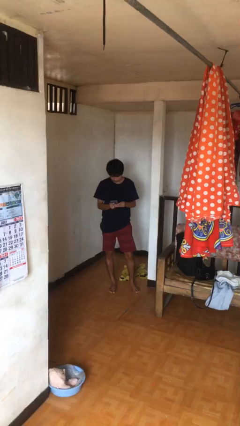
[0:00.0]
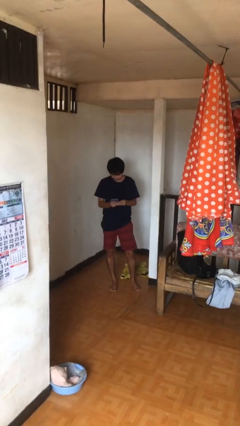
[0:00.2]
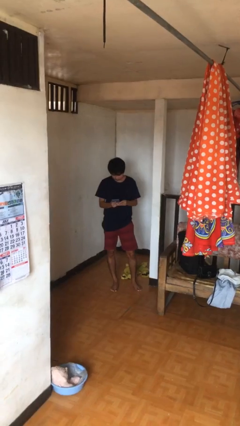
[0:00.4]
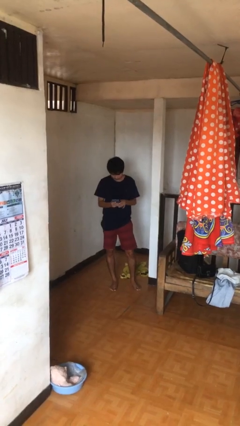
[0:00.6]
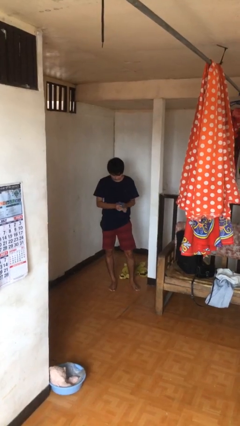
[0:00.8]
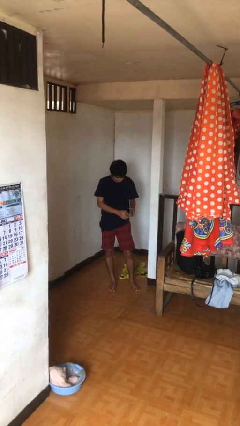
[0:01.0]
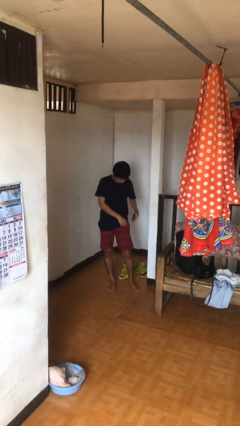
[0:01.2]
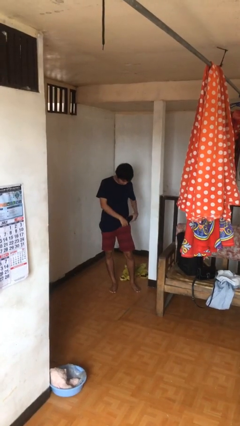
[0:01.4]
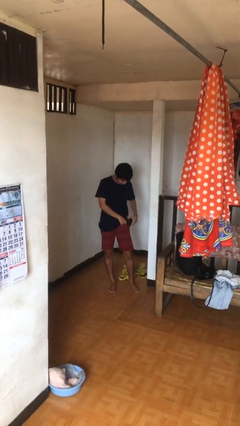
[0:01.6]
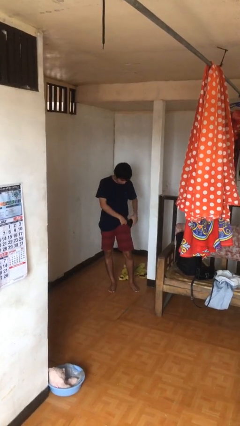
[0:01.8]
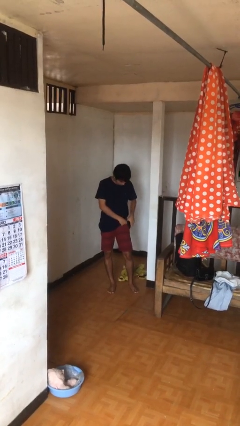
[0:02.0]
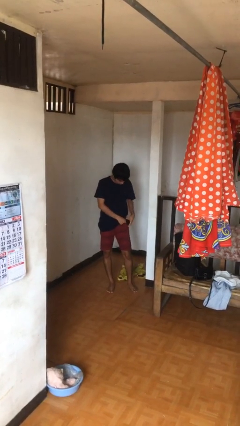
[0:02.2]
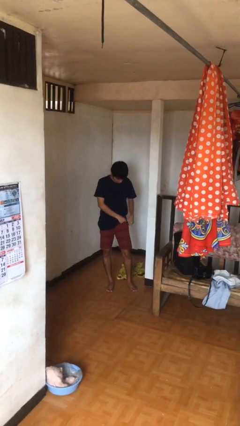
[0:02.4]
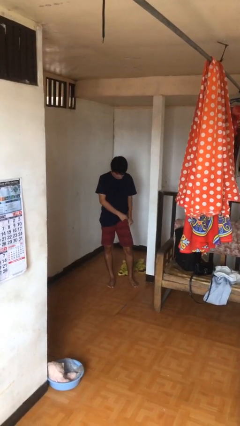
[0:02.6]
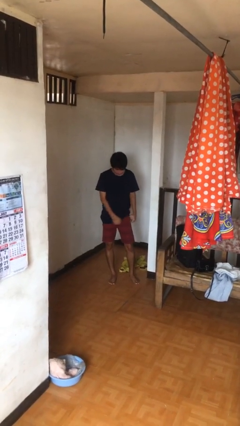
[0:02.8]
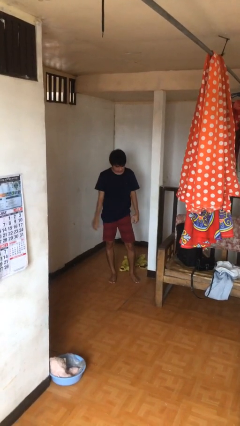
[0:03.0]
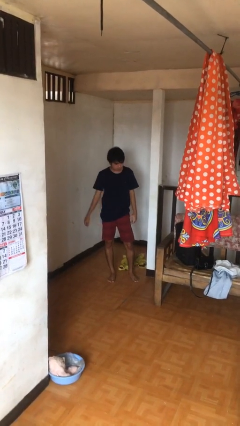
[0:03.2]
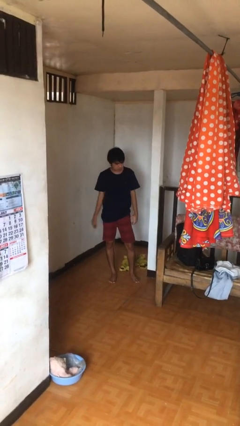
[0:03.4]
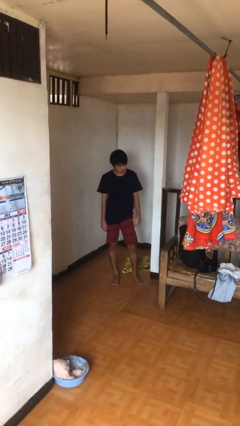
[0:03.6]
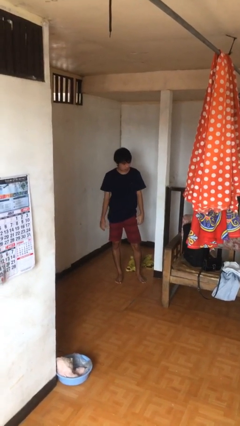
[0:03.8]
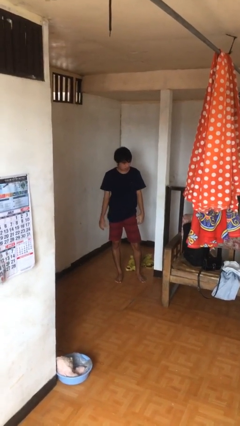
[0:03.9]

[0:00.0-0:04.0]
person puts phone into pocket

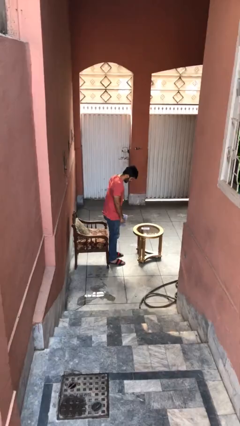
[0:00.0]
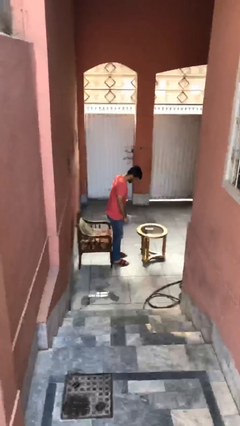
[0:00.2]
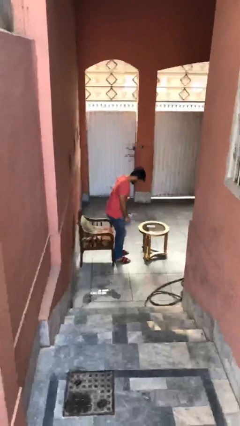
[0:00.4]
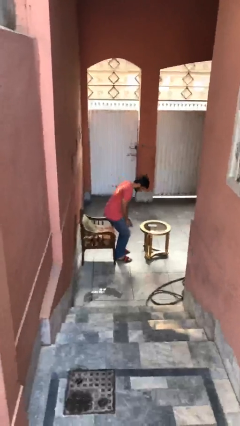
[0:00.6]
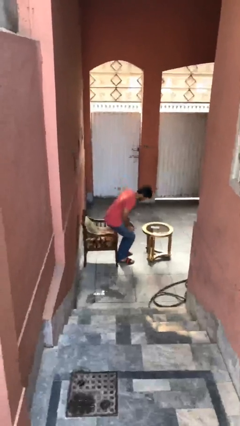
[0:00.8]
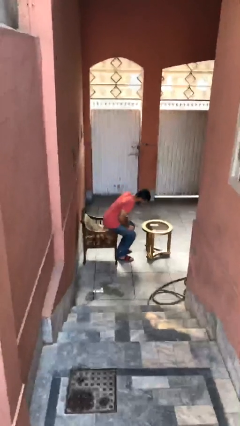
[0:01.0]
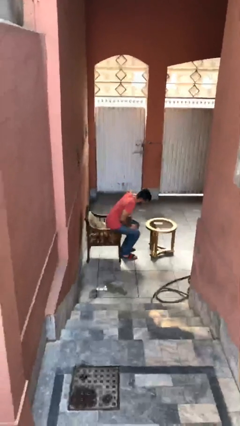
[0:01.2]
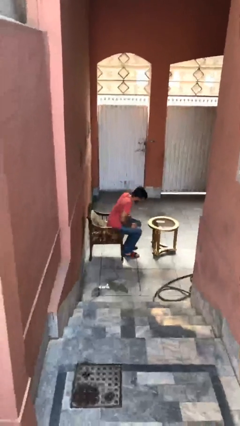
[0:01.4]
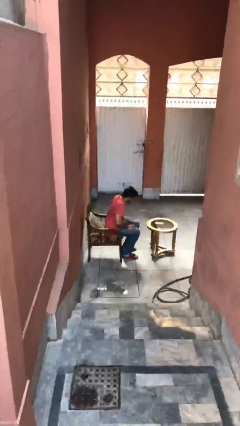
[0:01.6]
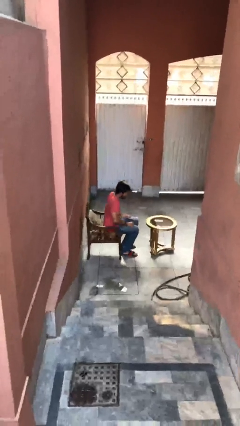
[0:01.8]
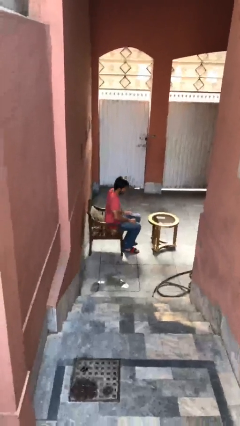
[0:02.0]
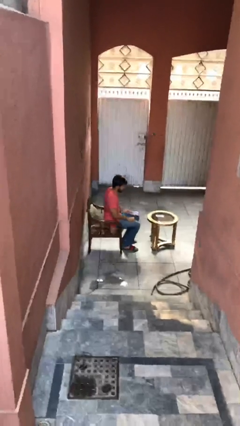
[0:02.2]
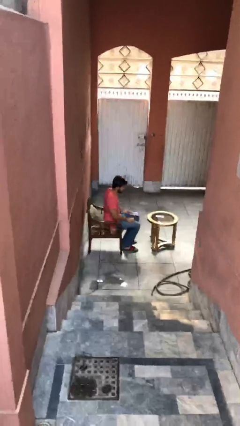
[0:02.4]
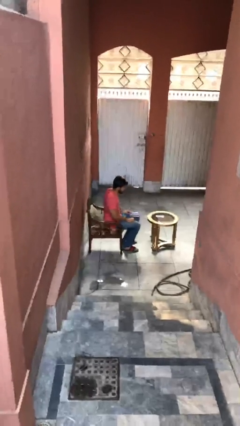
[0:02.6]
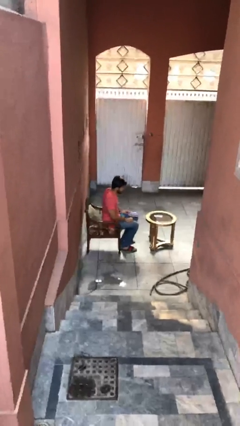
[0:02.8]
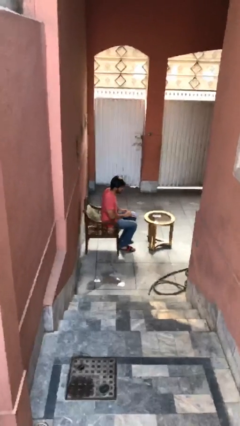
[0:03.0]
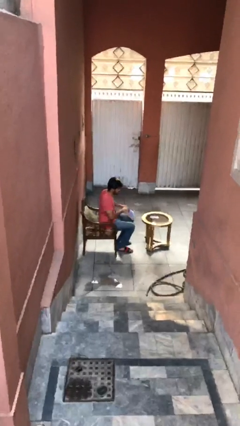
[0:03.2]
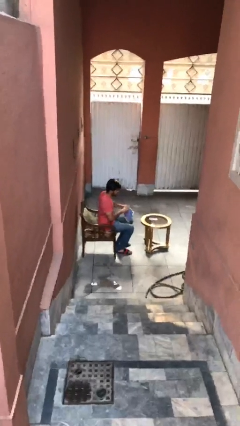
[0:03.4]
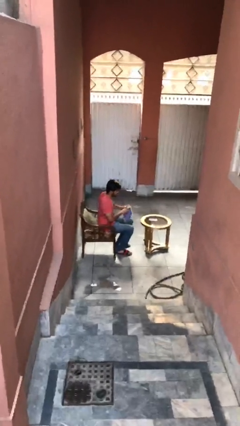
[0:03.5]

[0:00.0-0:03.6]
person sits down

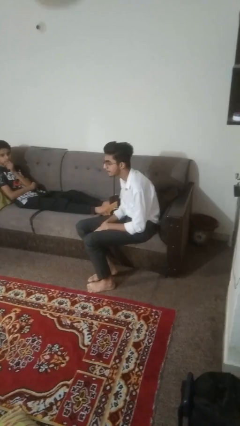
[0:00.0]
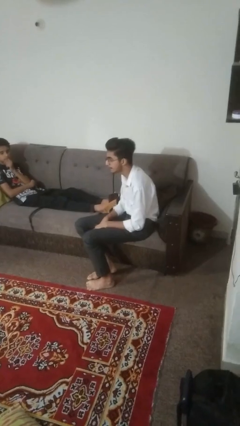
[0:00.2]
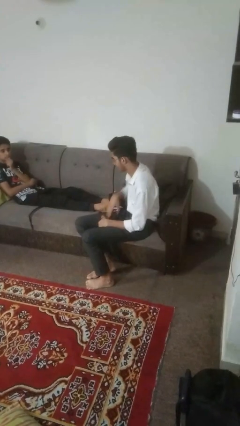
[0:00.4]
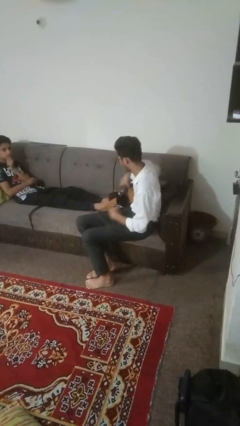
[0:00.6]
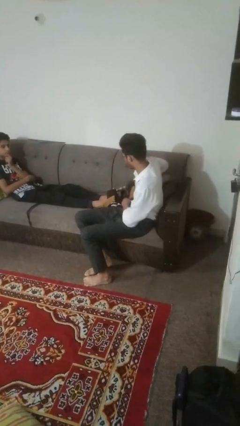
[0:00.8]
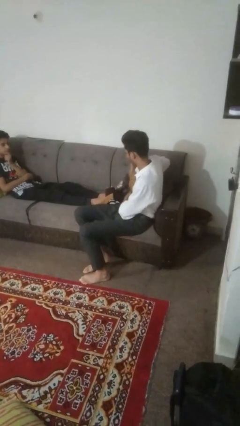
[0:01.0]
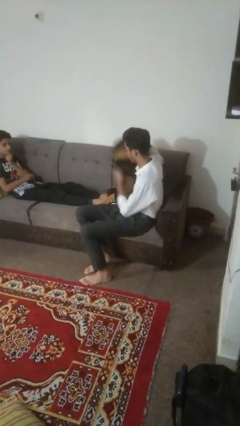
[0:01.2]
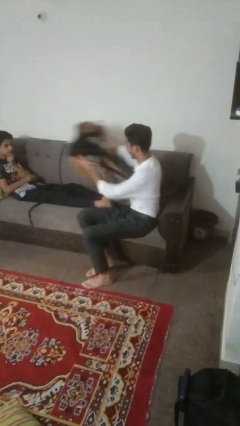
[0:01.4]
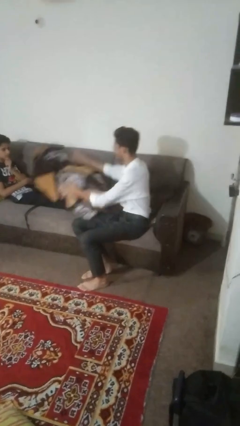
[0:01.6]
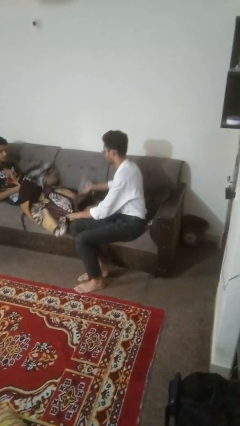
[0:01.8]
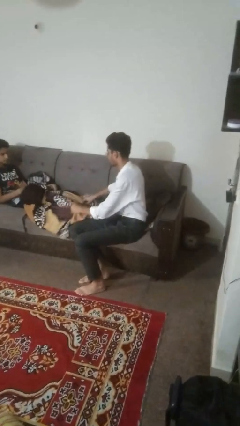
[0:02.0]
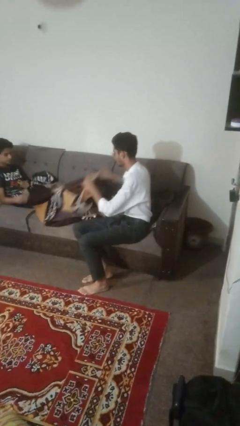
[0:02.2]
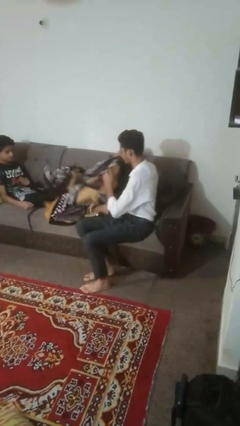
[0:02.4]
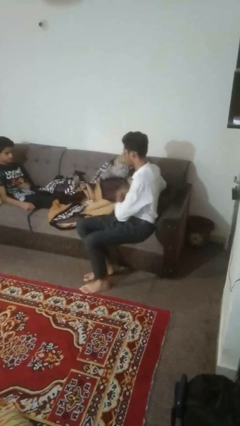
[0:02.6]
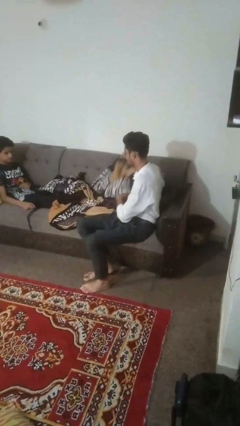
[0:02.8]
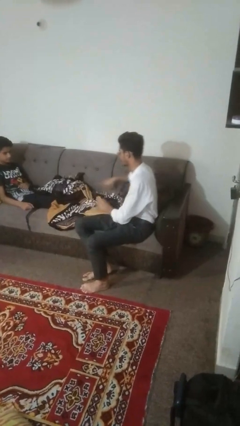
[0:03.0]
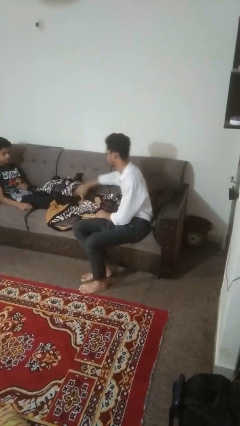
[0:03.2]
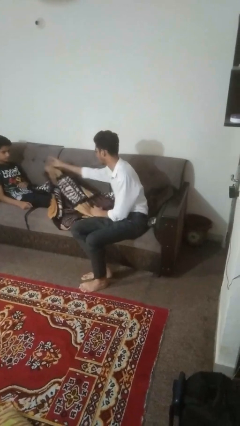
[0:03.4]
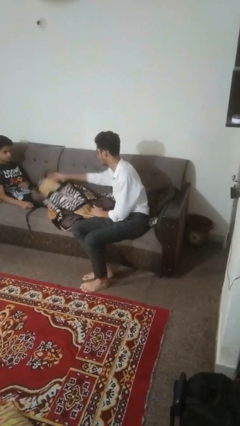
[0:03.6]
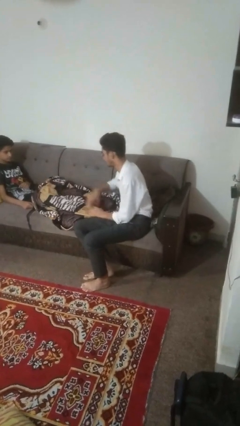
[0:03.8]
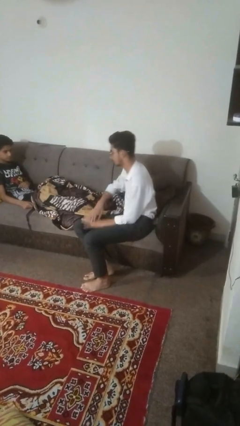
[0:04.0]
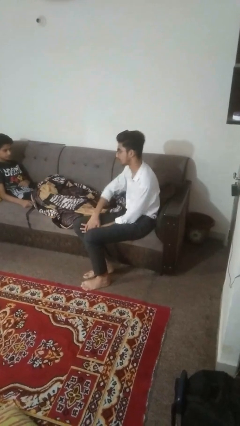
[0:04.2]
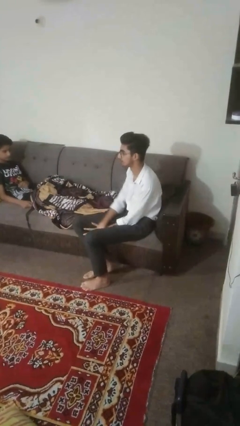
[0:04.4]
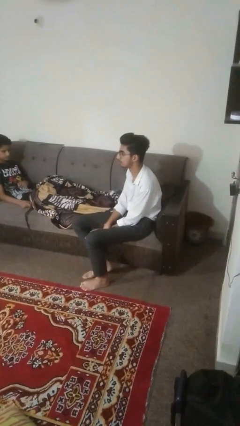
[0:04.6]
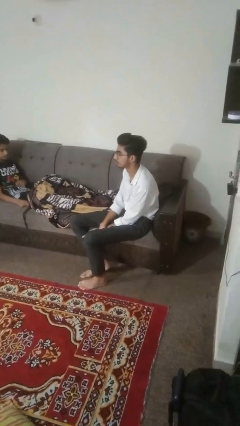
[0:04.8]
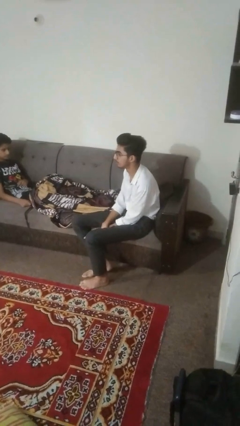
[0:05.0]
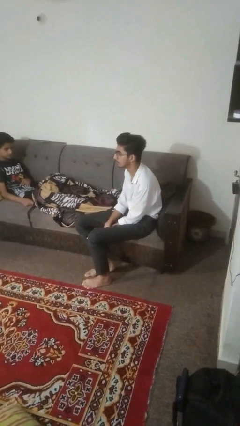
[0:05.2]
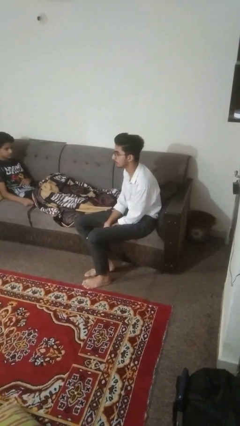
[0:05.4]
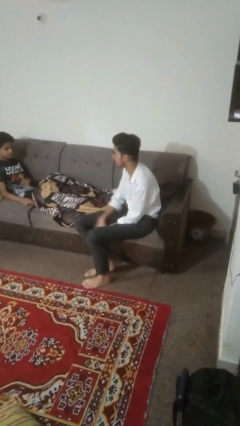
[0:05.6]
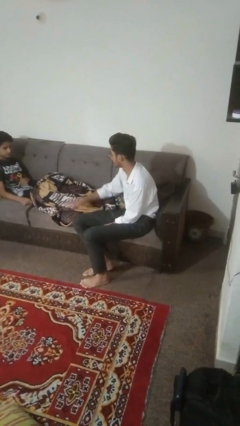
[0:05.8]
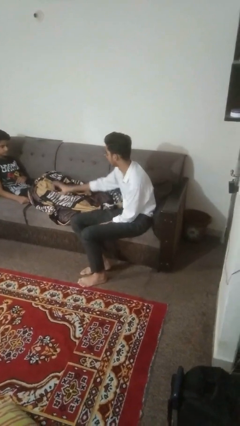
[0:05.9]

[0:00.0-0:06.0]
person covers friend with blanket

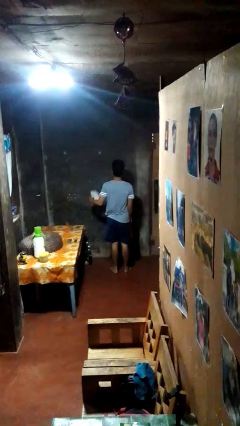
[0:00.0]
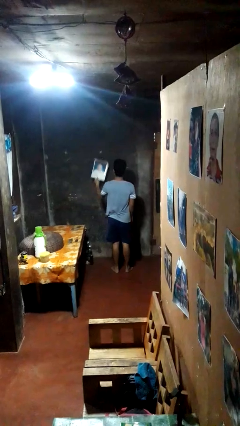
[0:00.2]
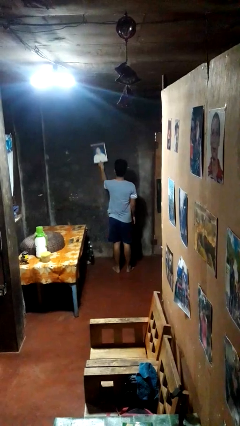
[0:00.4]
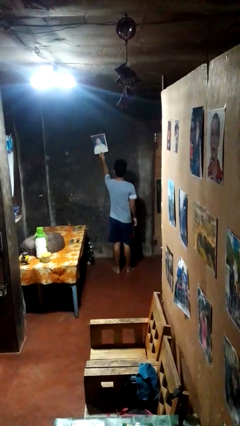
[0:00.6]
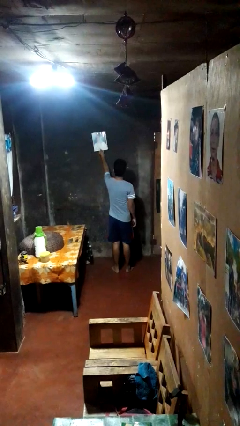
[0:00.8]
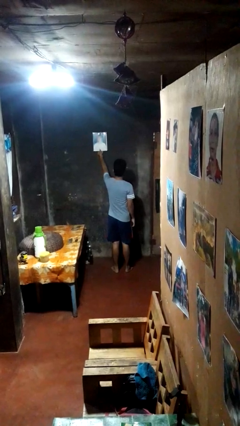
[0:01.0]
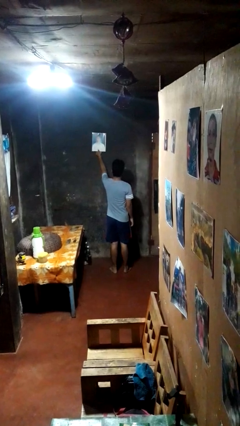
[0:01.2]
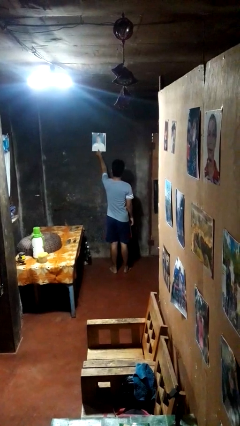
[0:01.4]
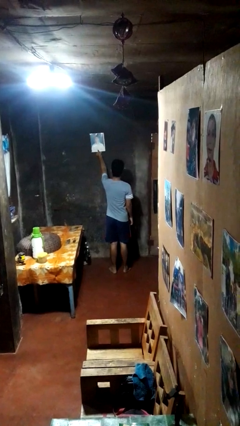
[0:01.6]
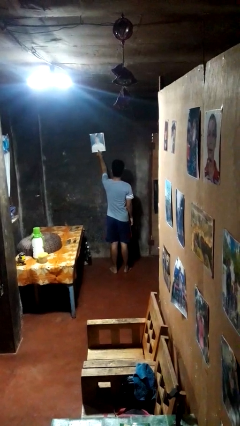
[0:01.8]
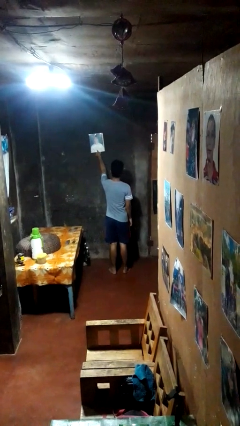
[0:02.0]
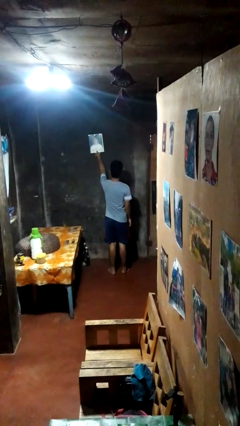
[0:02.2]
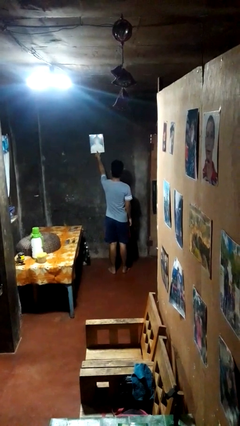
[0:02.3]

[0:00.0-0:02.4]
person puts up picture frame

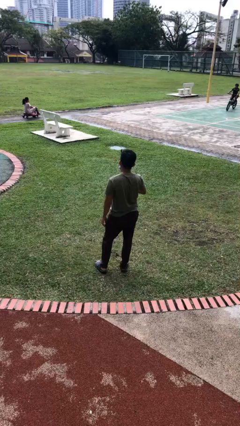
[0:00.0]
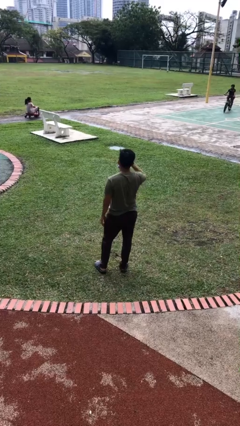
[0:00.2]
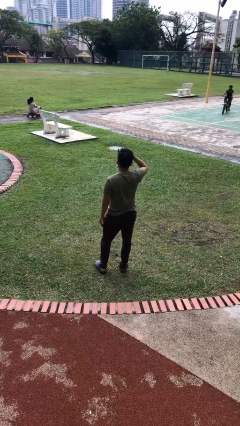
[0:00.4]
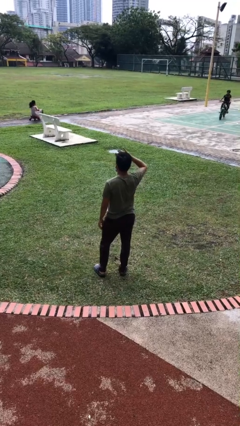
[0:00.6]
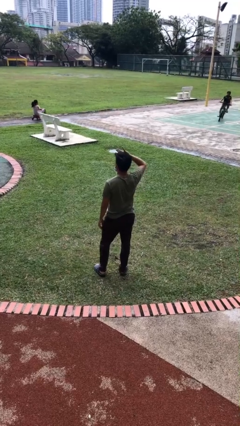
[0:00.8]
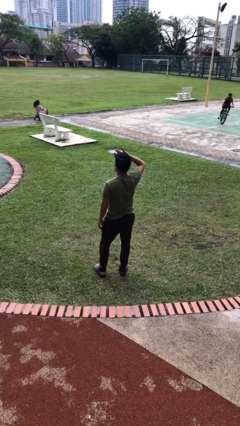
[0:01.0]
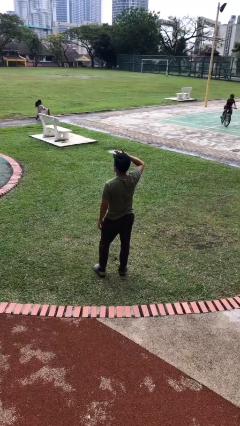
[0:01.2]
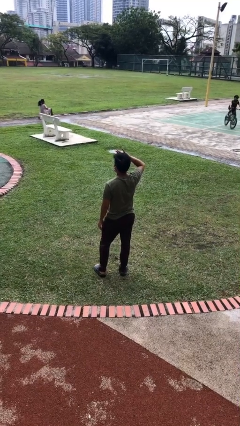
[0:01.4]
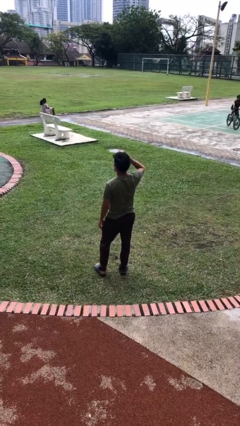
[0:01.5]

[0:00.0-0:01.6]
person shades eyes
